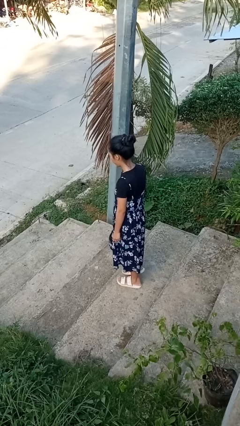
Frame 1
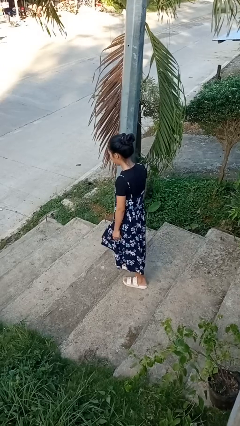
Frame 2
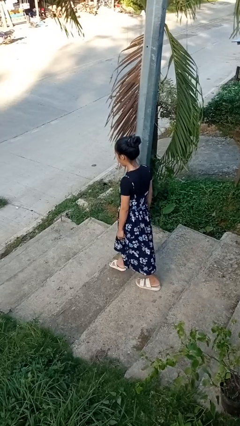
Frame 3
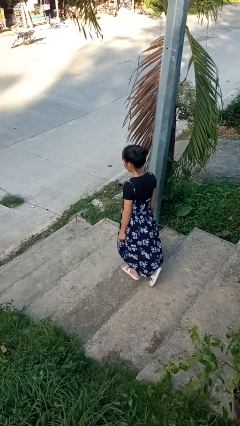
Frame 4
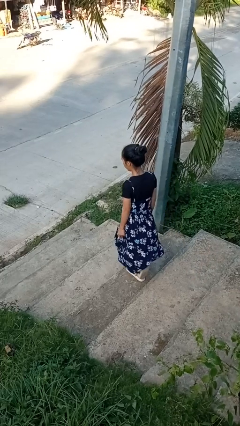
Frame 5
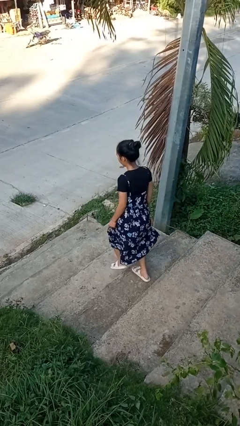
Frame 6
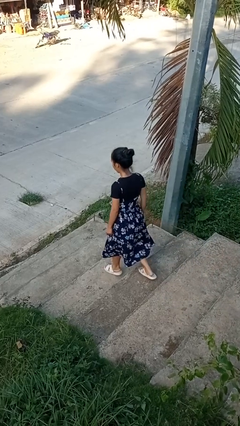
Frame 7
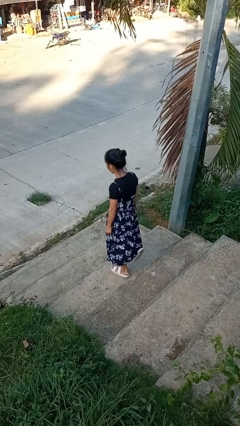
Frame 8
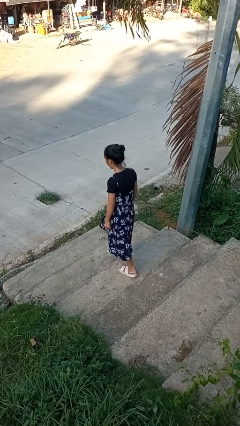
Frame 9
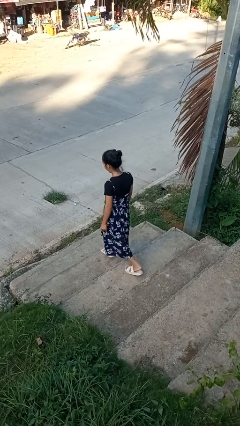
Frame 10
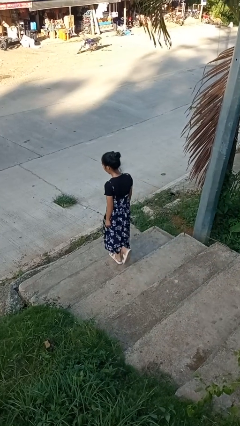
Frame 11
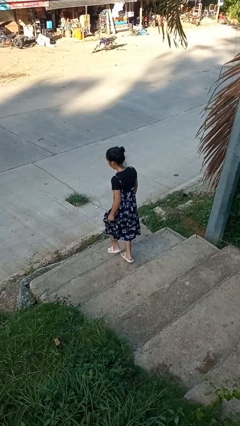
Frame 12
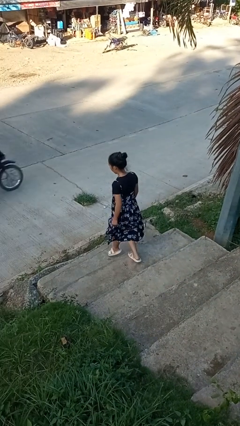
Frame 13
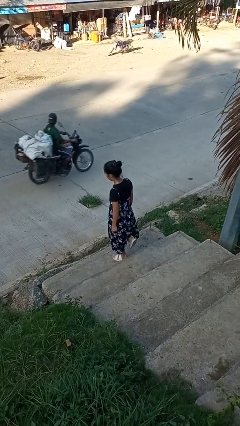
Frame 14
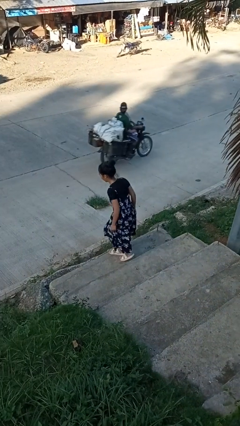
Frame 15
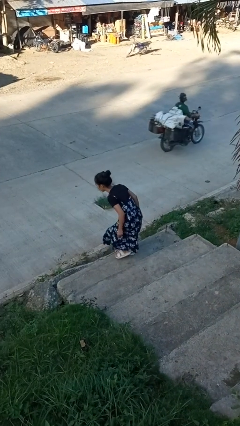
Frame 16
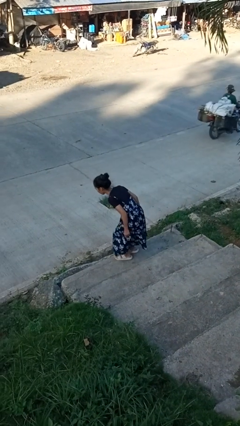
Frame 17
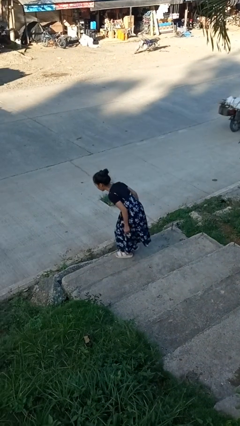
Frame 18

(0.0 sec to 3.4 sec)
person climbs down stairs

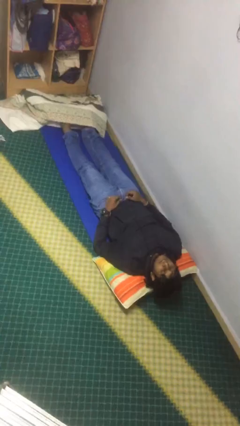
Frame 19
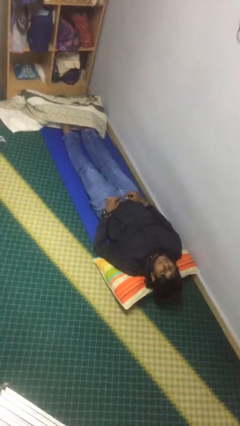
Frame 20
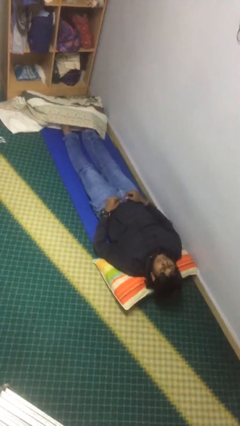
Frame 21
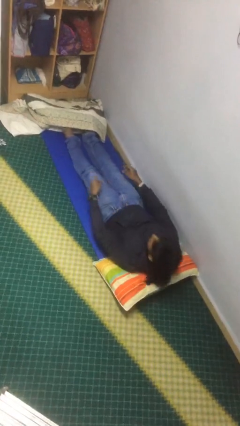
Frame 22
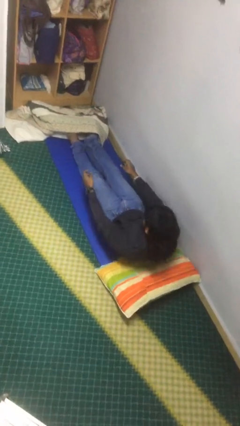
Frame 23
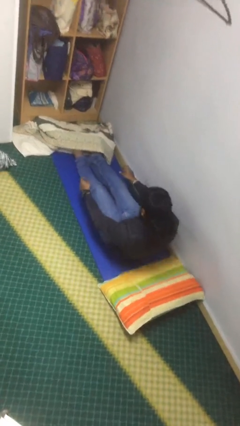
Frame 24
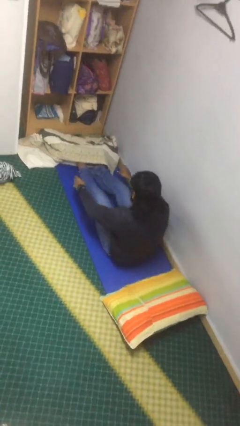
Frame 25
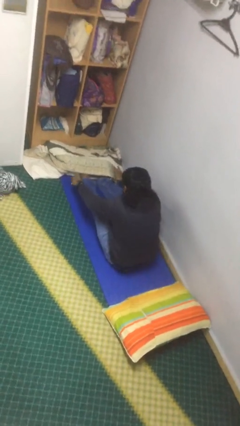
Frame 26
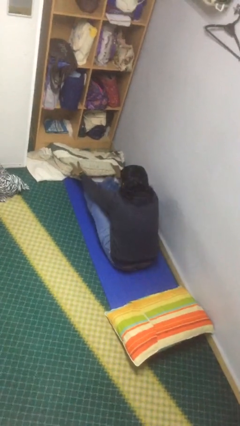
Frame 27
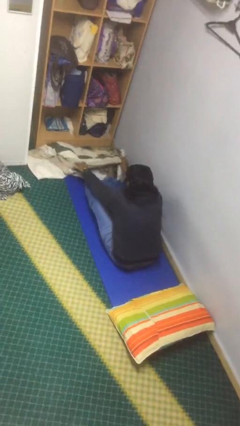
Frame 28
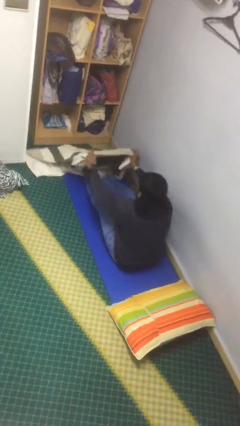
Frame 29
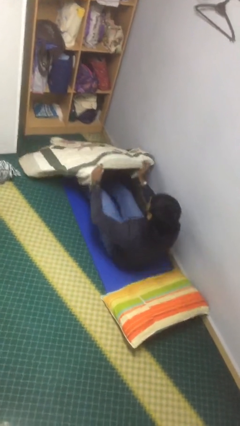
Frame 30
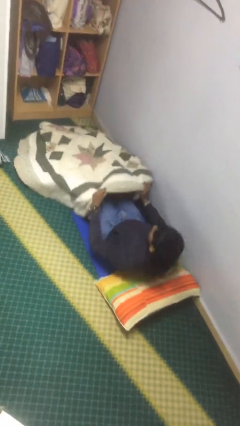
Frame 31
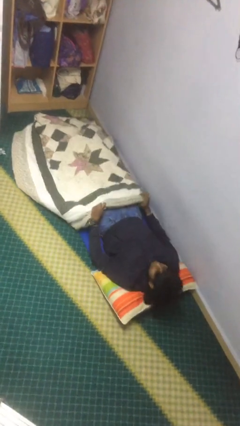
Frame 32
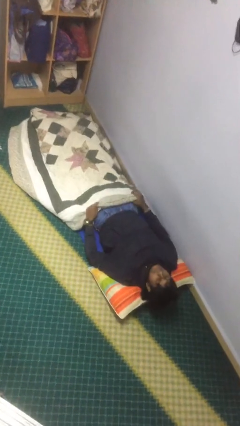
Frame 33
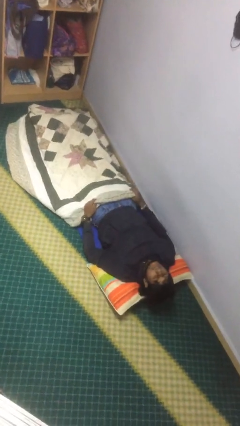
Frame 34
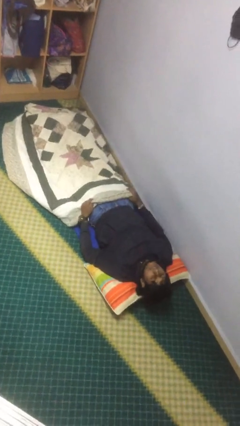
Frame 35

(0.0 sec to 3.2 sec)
person covers with bedsheets

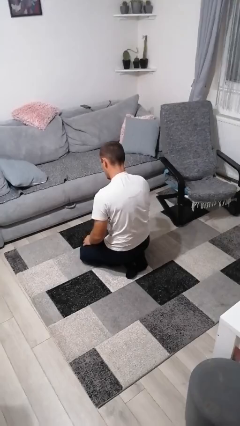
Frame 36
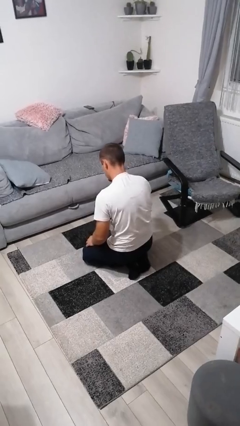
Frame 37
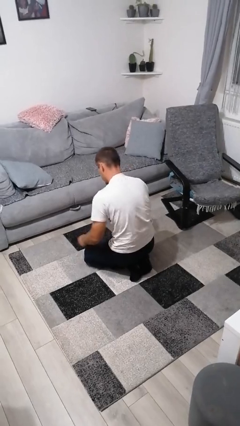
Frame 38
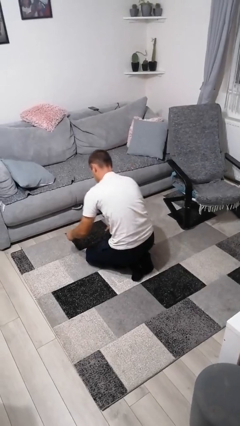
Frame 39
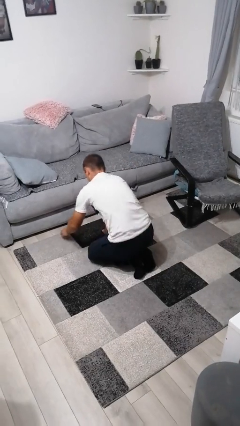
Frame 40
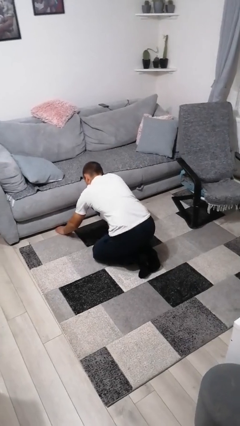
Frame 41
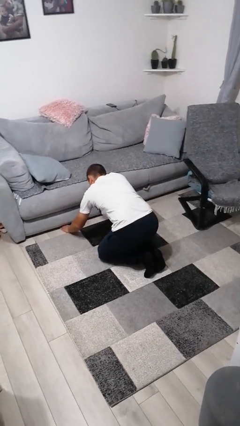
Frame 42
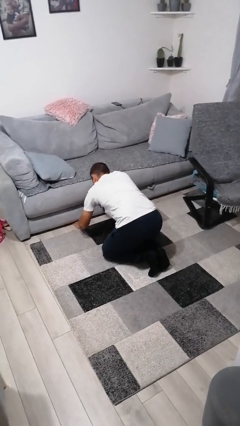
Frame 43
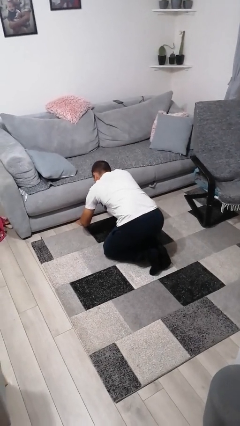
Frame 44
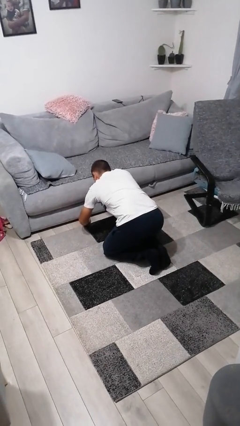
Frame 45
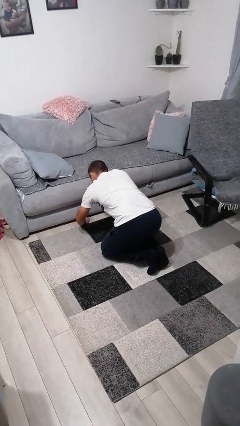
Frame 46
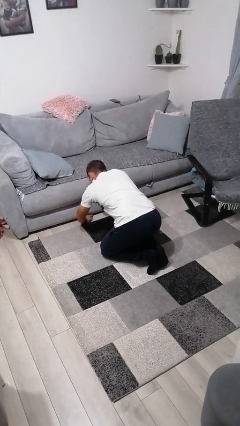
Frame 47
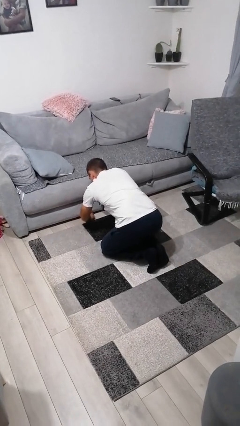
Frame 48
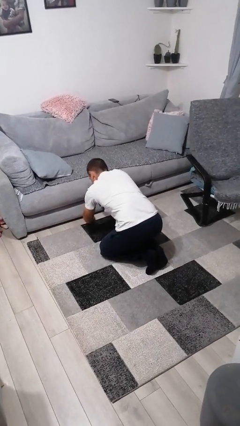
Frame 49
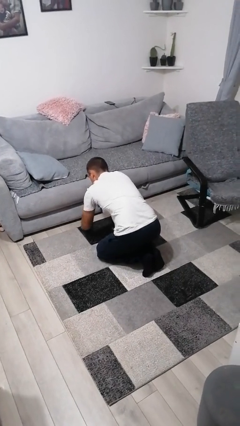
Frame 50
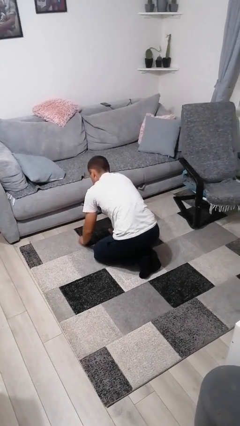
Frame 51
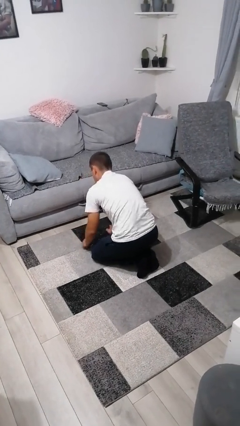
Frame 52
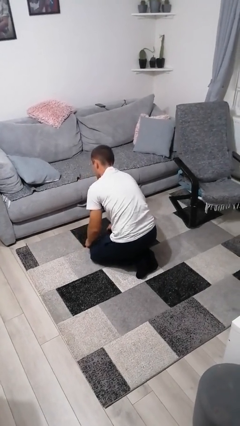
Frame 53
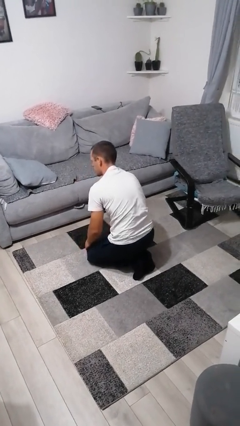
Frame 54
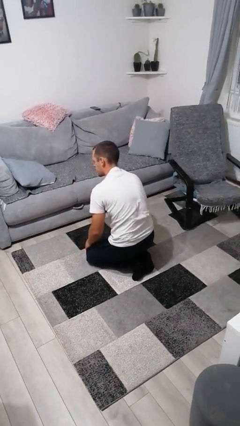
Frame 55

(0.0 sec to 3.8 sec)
person searches under couch

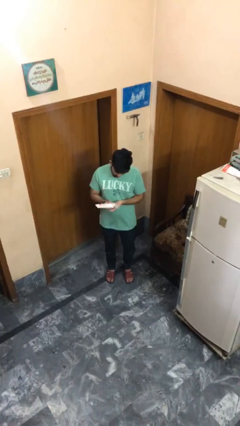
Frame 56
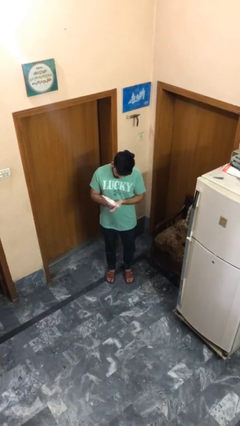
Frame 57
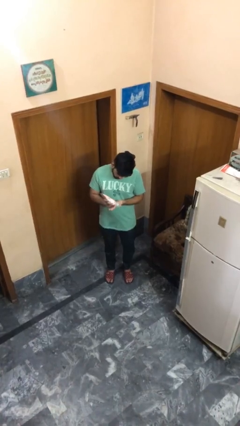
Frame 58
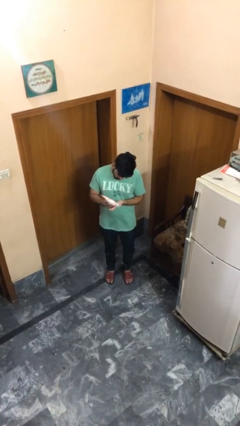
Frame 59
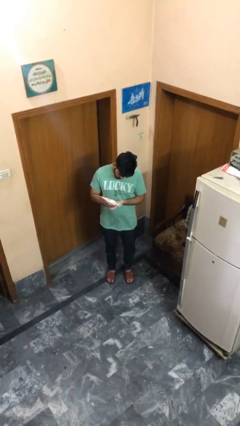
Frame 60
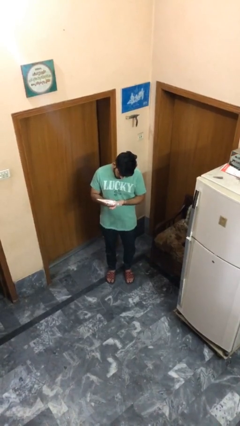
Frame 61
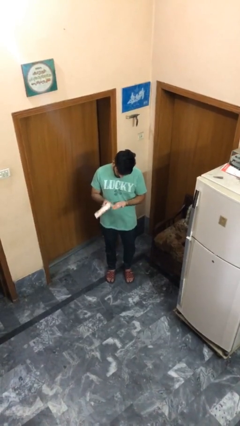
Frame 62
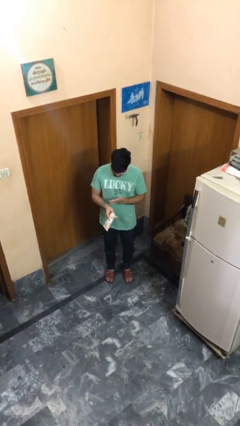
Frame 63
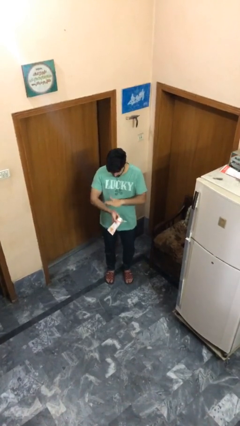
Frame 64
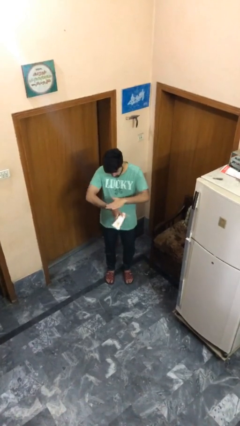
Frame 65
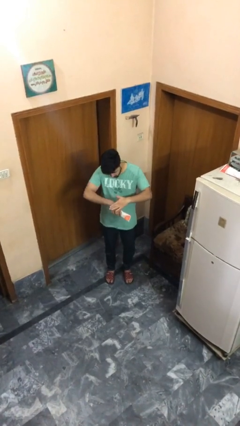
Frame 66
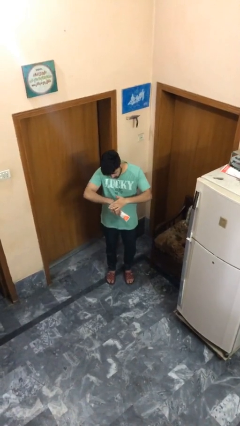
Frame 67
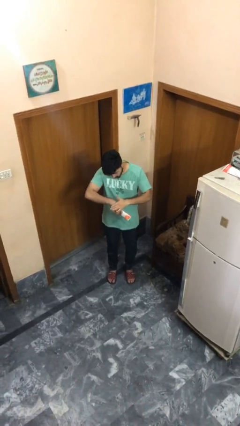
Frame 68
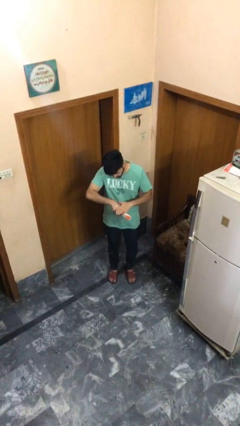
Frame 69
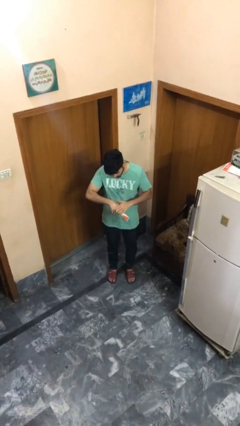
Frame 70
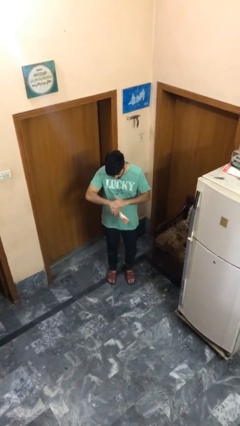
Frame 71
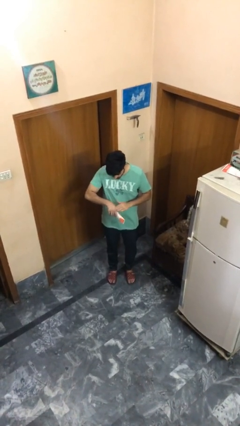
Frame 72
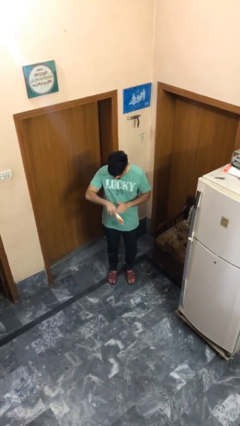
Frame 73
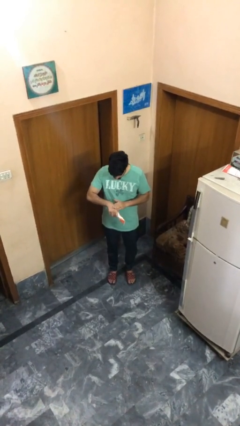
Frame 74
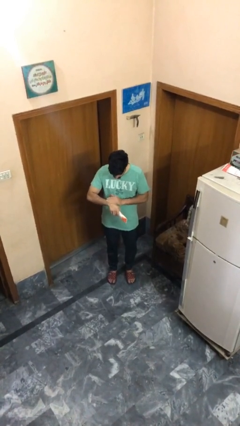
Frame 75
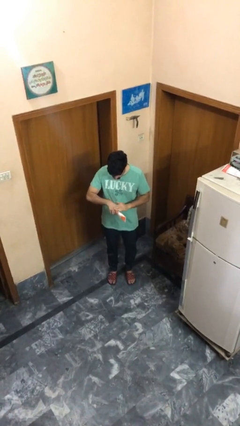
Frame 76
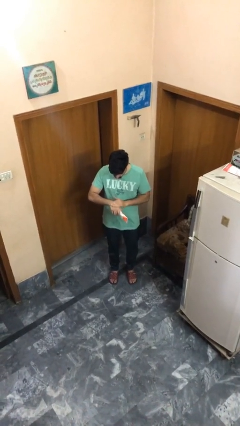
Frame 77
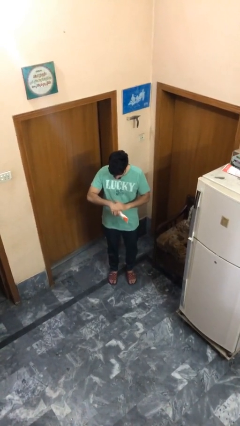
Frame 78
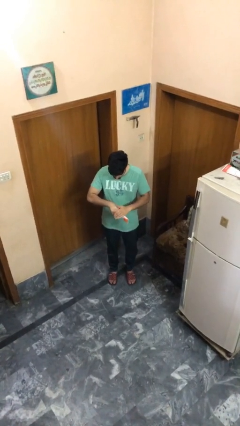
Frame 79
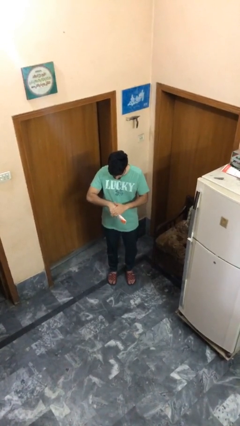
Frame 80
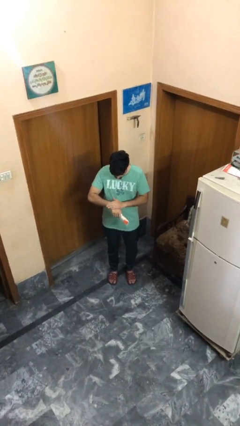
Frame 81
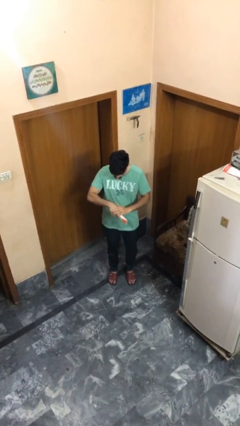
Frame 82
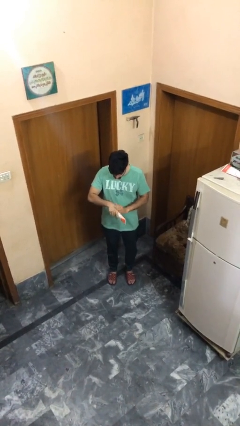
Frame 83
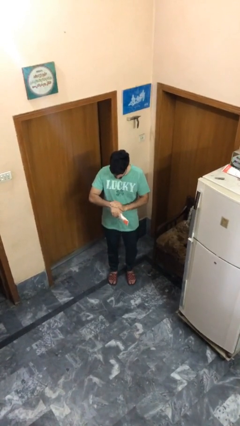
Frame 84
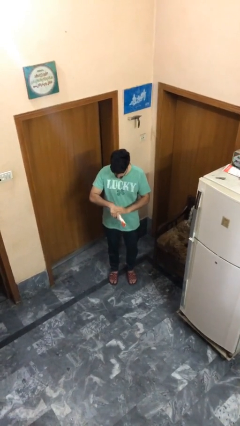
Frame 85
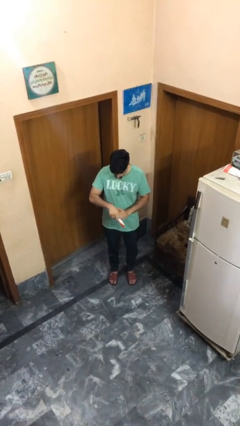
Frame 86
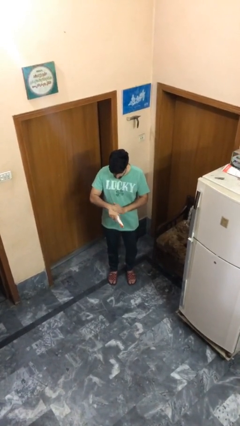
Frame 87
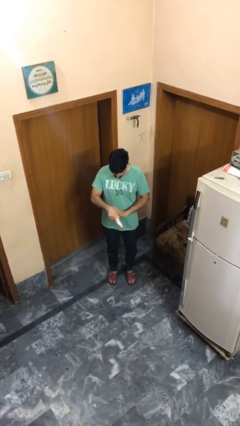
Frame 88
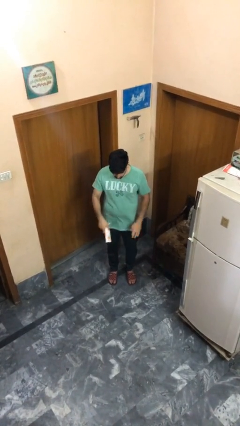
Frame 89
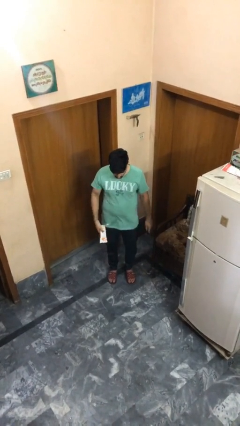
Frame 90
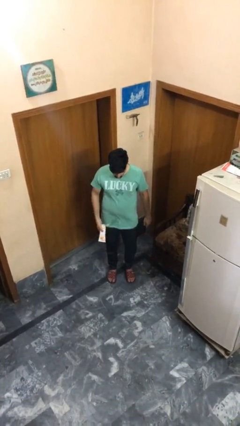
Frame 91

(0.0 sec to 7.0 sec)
person applies sunscreen
